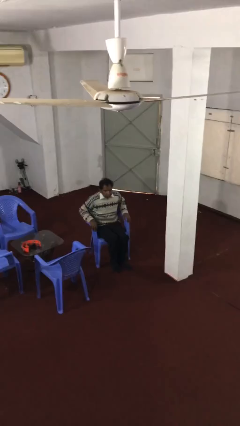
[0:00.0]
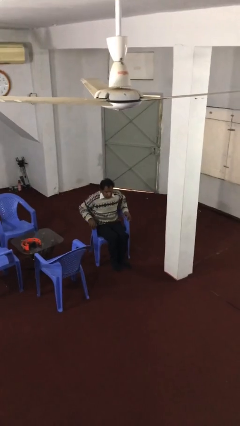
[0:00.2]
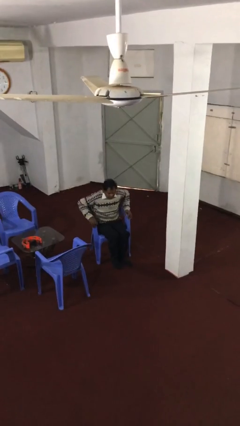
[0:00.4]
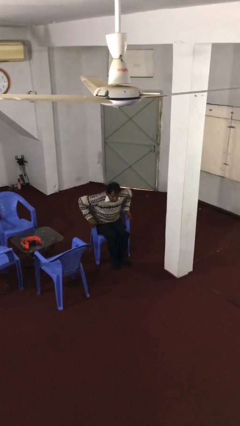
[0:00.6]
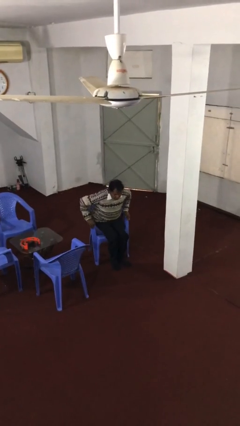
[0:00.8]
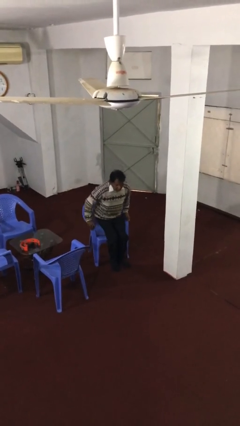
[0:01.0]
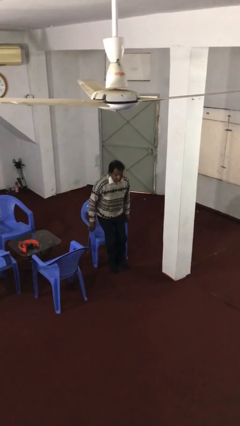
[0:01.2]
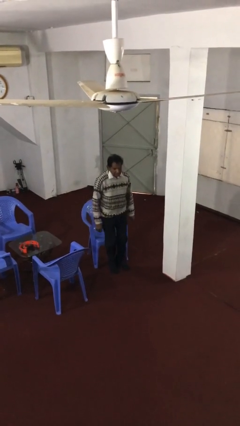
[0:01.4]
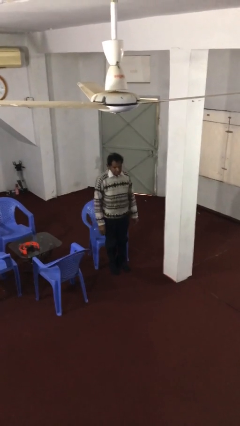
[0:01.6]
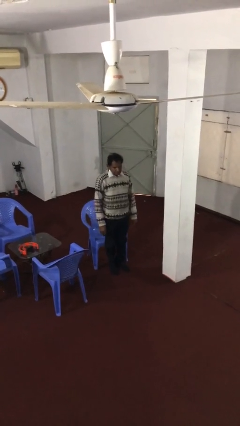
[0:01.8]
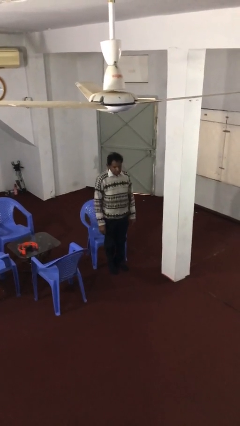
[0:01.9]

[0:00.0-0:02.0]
person stands up

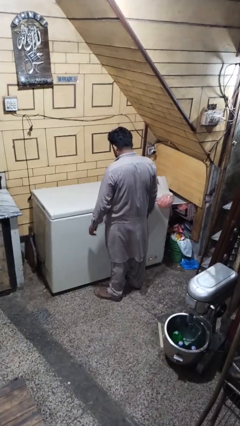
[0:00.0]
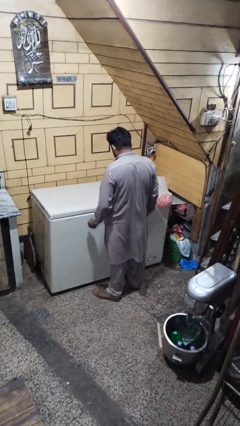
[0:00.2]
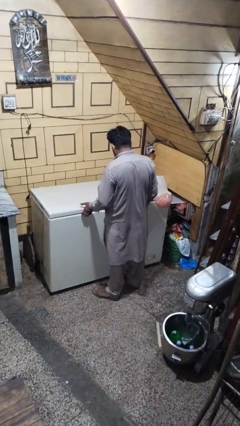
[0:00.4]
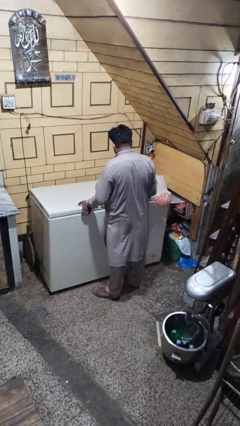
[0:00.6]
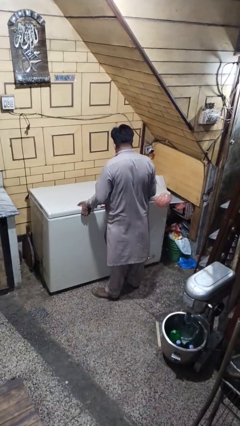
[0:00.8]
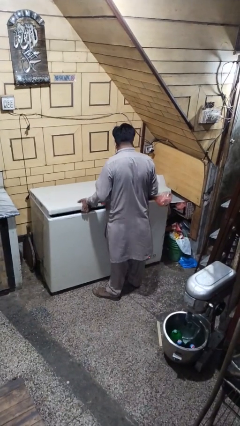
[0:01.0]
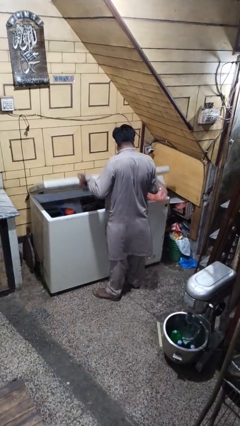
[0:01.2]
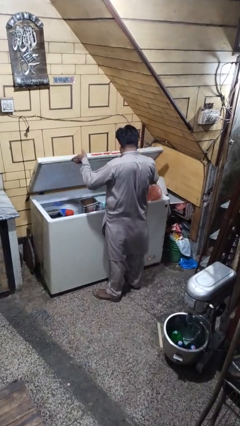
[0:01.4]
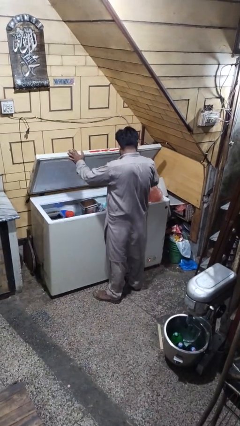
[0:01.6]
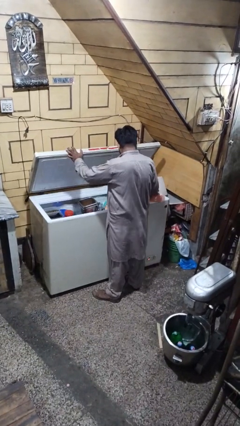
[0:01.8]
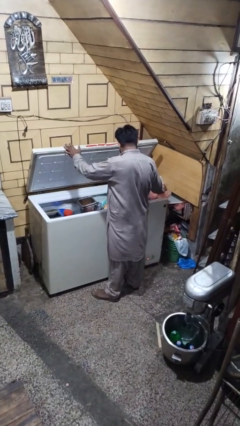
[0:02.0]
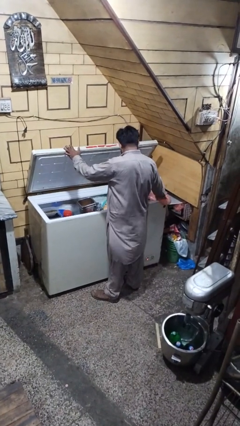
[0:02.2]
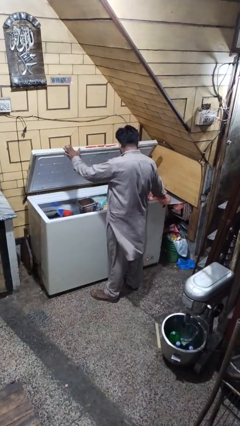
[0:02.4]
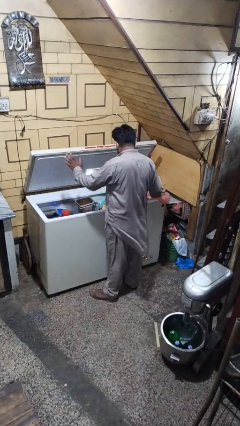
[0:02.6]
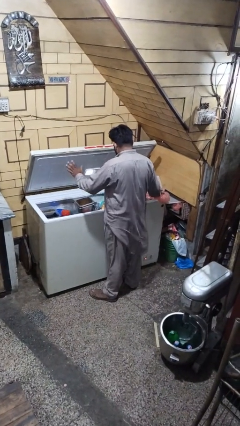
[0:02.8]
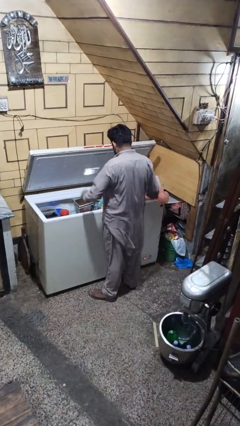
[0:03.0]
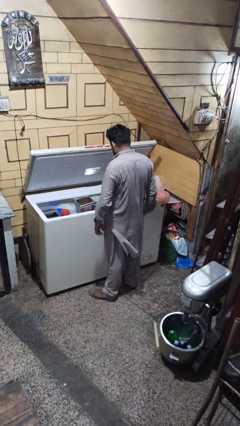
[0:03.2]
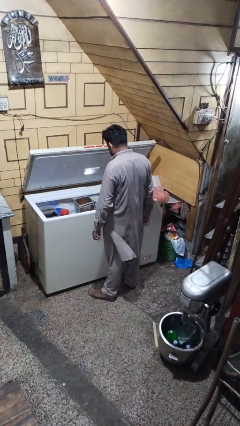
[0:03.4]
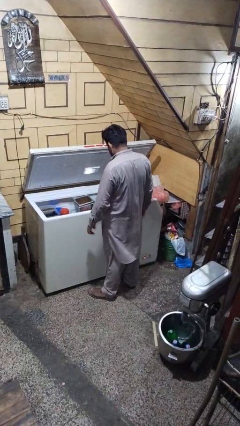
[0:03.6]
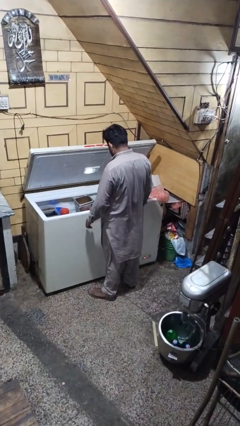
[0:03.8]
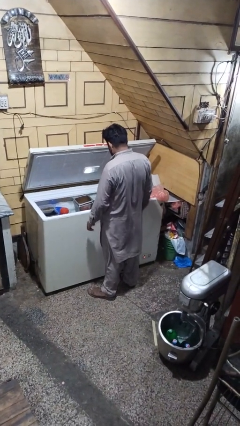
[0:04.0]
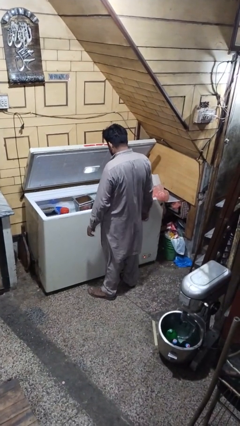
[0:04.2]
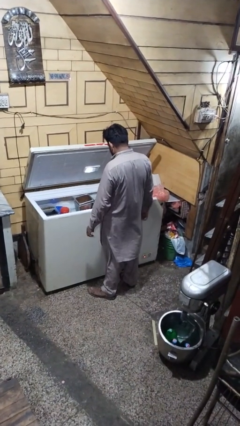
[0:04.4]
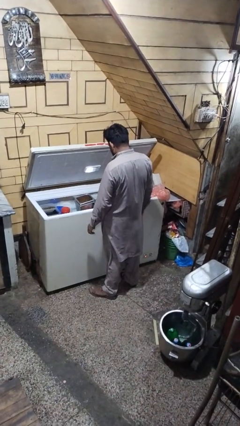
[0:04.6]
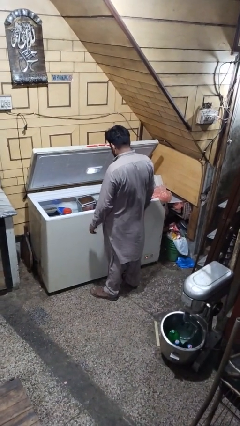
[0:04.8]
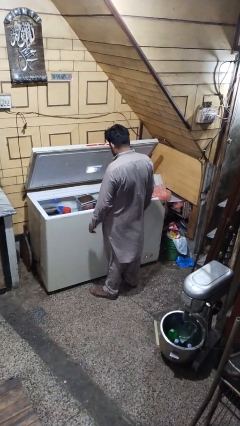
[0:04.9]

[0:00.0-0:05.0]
person opens refrigerator

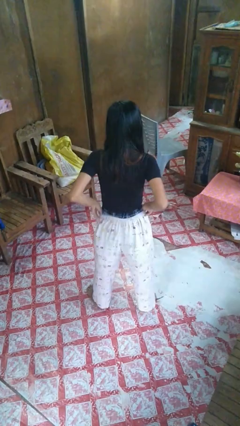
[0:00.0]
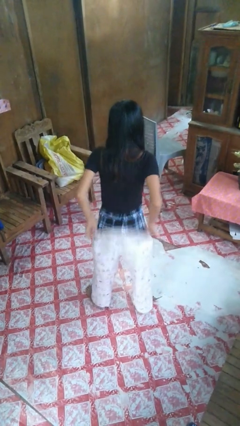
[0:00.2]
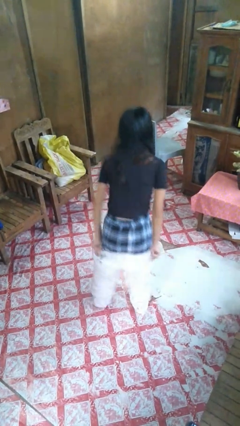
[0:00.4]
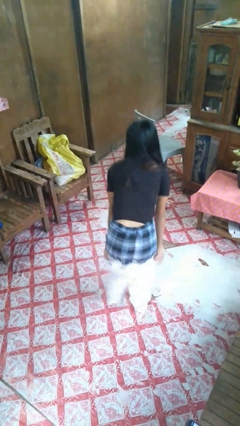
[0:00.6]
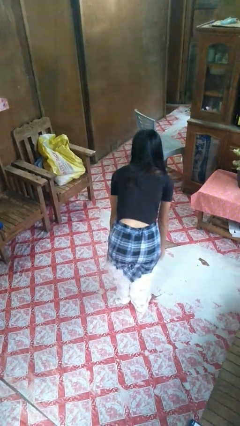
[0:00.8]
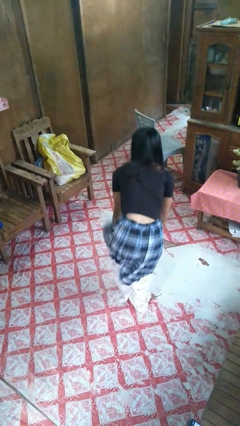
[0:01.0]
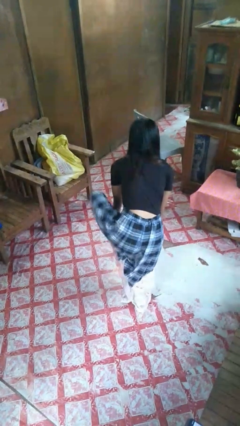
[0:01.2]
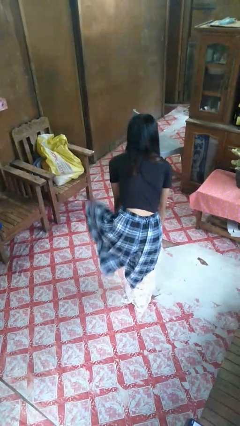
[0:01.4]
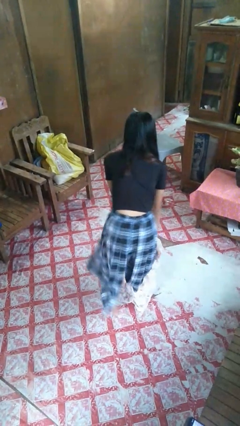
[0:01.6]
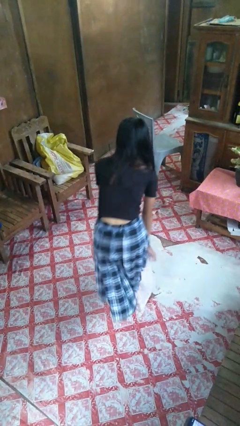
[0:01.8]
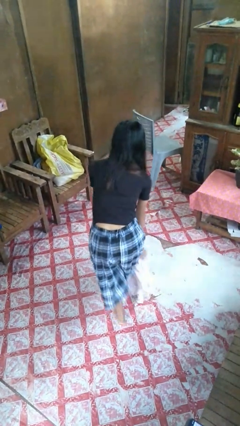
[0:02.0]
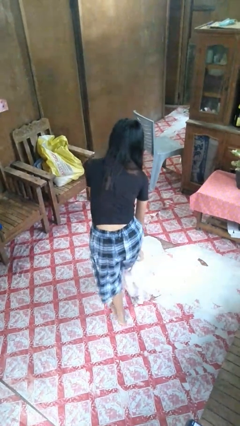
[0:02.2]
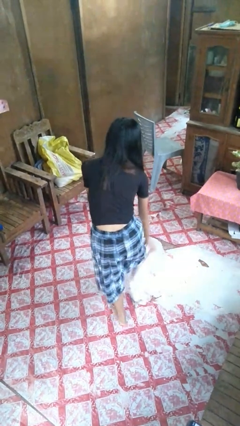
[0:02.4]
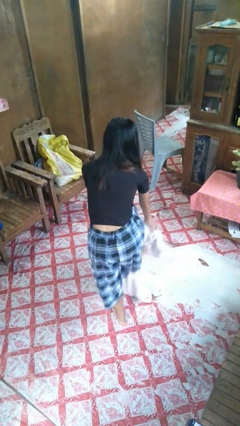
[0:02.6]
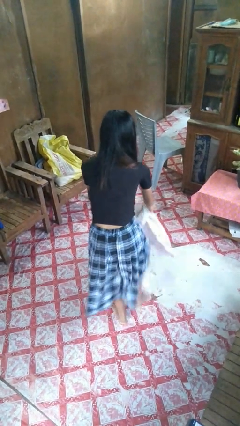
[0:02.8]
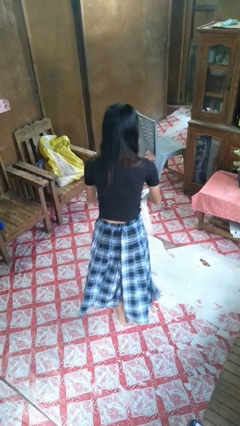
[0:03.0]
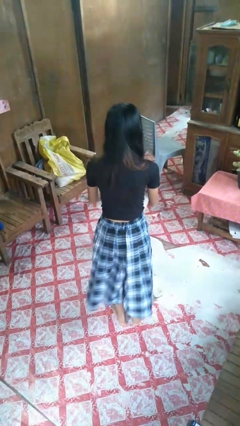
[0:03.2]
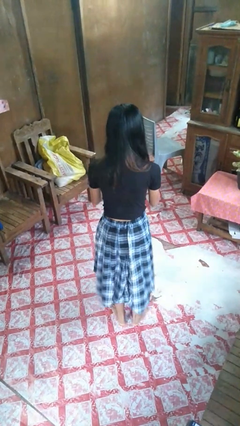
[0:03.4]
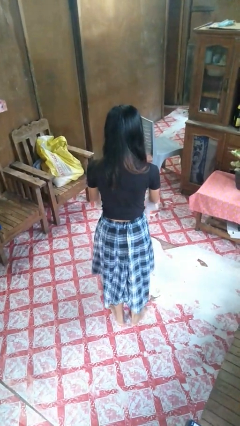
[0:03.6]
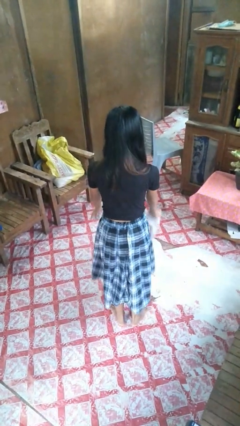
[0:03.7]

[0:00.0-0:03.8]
person takes off pants

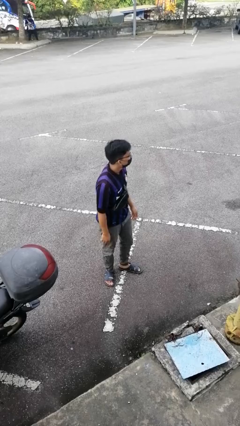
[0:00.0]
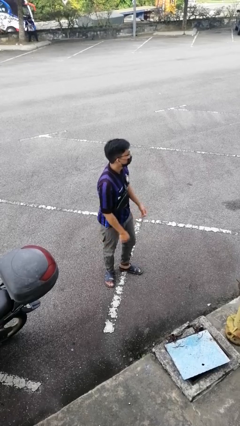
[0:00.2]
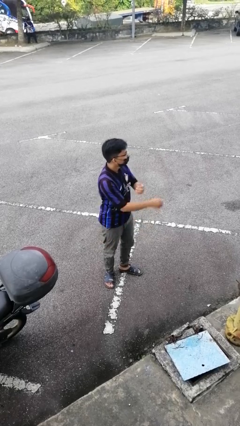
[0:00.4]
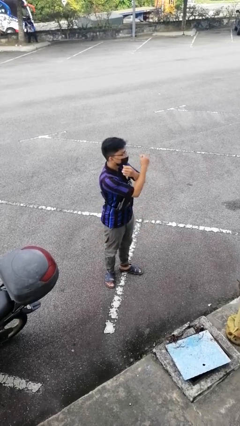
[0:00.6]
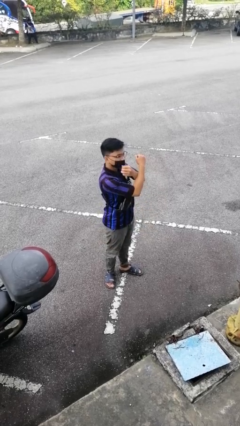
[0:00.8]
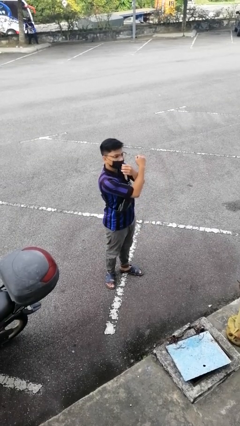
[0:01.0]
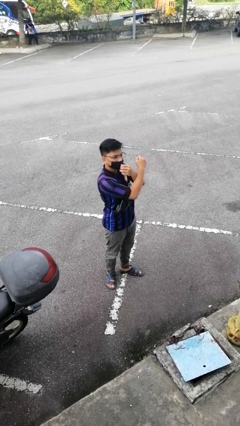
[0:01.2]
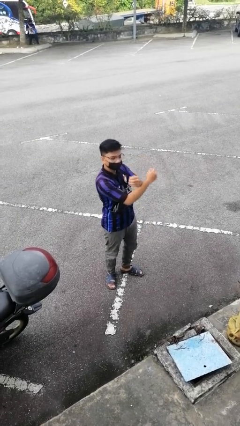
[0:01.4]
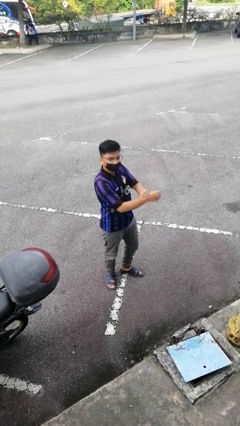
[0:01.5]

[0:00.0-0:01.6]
person gestures arms x

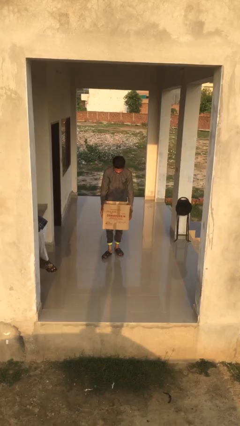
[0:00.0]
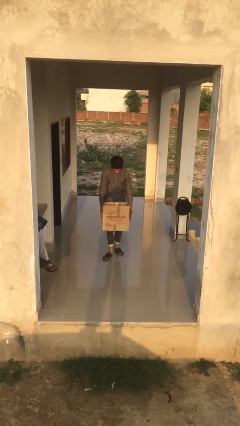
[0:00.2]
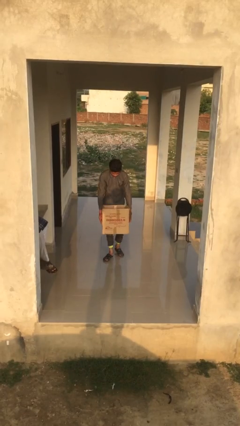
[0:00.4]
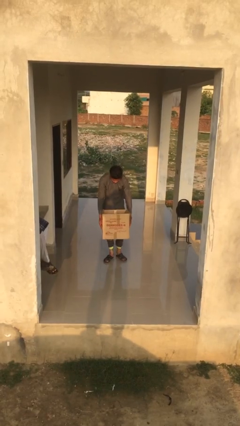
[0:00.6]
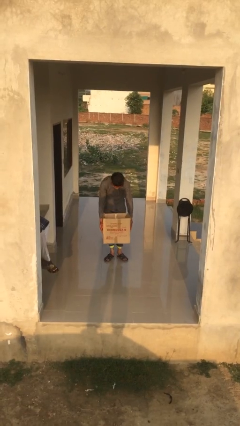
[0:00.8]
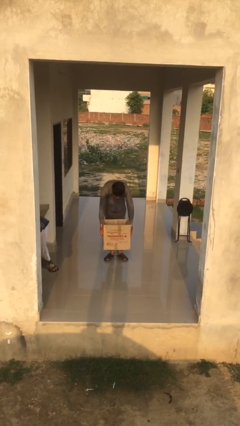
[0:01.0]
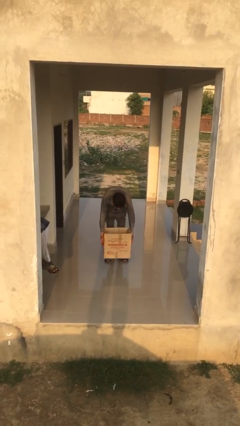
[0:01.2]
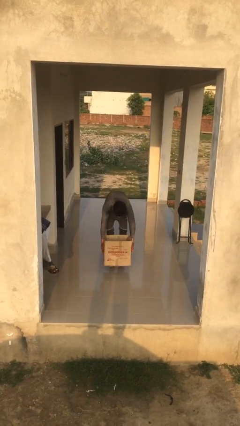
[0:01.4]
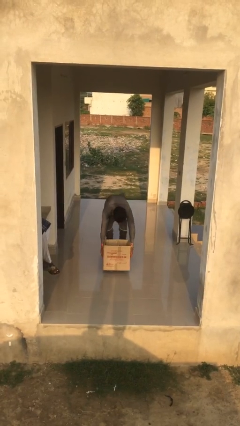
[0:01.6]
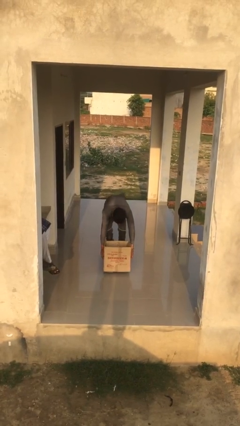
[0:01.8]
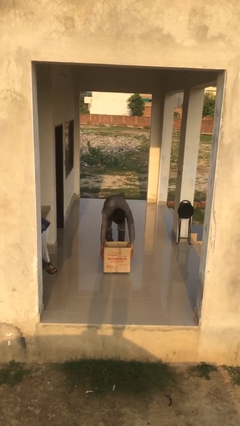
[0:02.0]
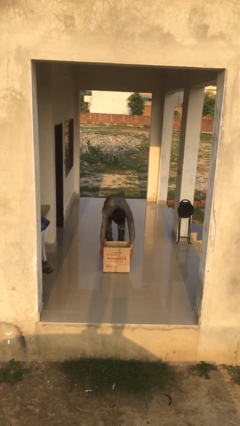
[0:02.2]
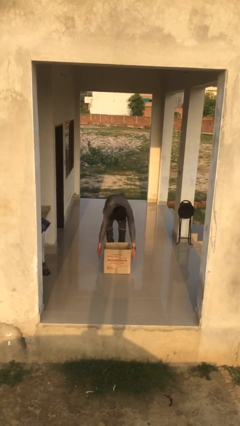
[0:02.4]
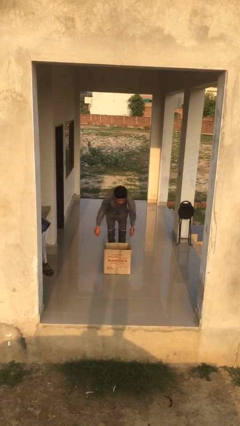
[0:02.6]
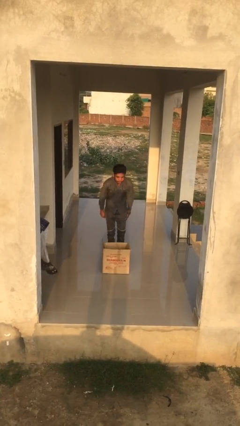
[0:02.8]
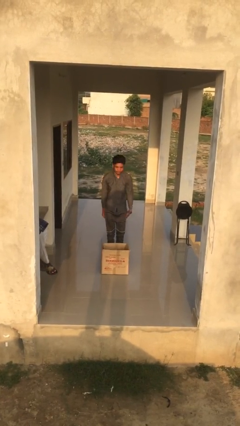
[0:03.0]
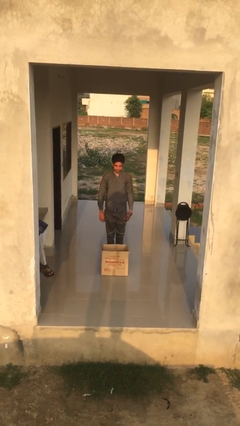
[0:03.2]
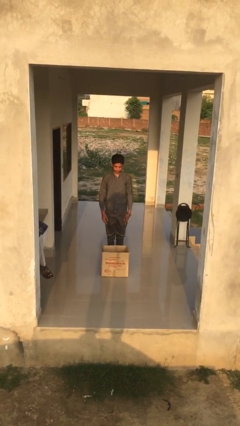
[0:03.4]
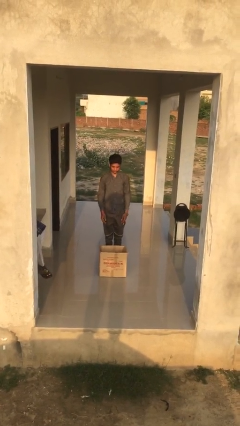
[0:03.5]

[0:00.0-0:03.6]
person puts down object on floor

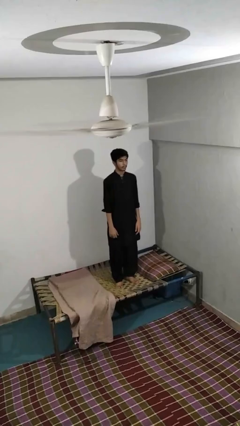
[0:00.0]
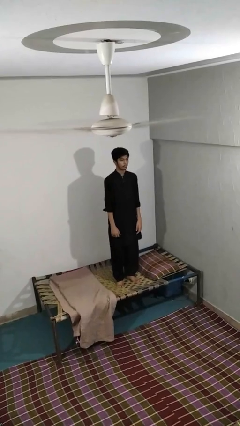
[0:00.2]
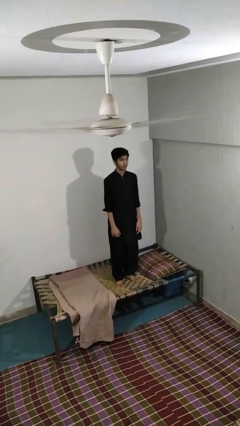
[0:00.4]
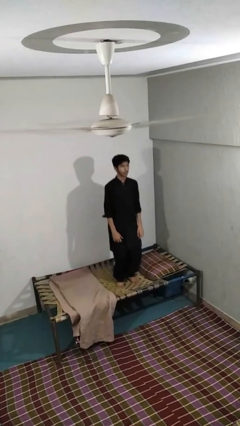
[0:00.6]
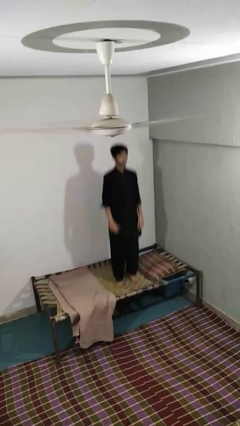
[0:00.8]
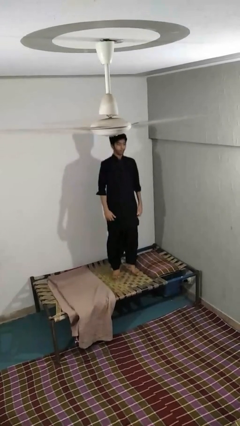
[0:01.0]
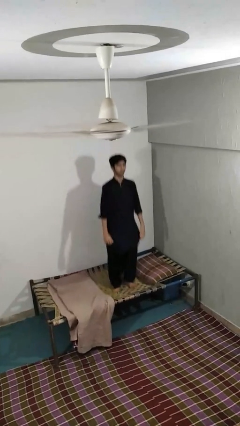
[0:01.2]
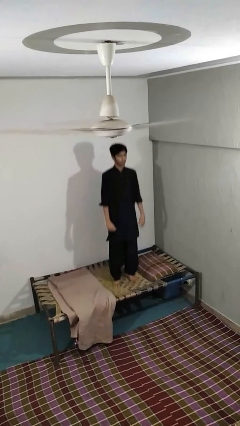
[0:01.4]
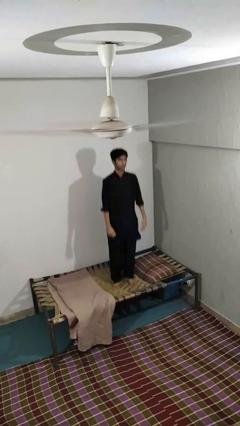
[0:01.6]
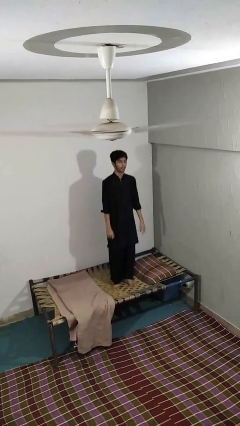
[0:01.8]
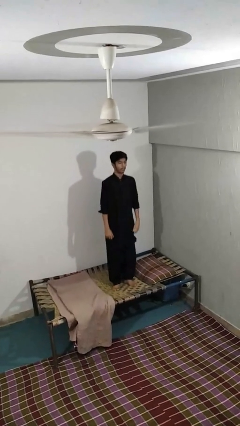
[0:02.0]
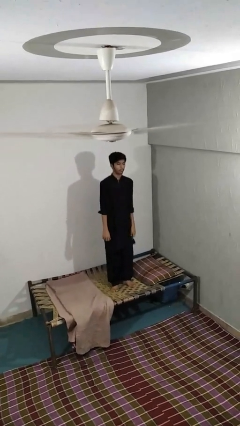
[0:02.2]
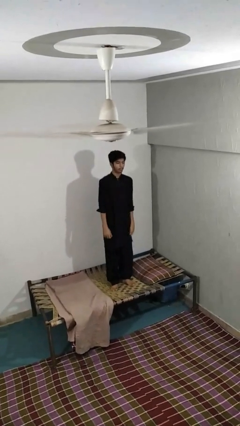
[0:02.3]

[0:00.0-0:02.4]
person jumps on bed
